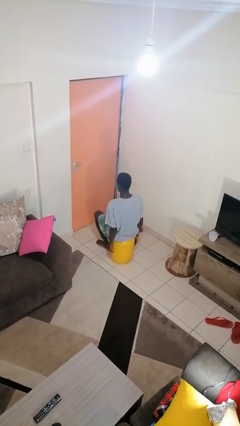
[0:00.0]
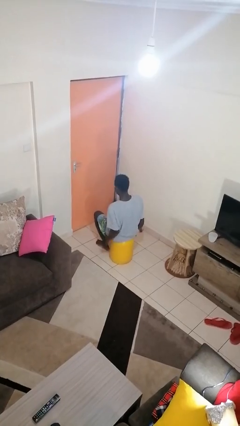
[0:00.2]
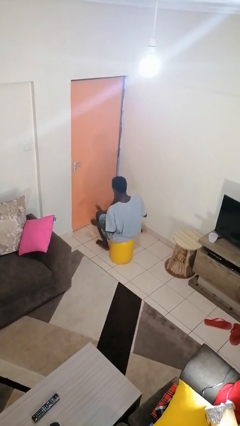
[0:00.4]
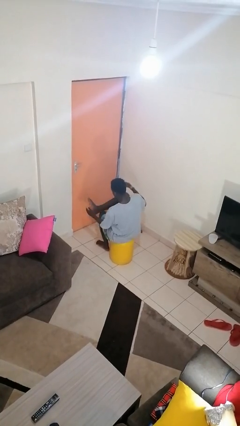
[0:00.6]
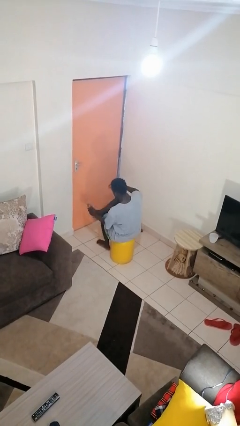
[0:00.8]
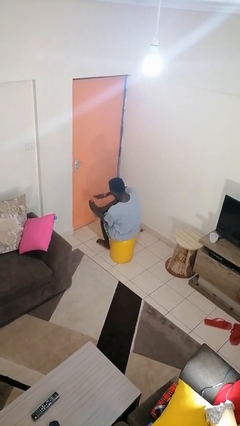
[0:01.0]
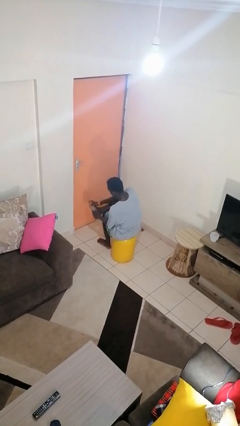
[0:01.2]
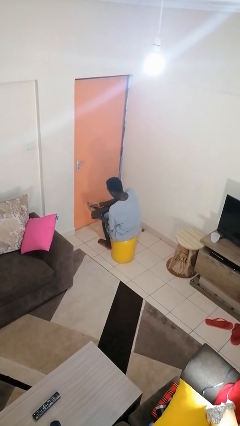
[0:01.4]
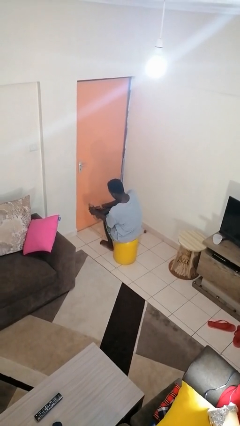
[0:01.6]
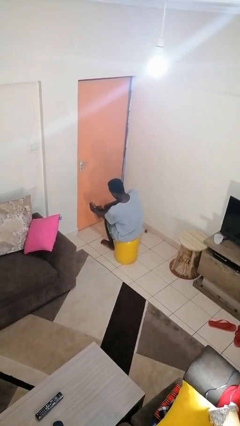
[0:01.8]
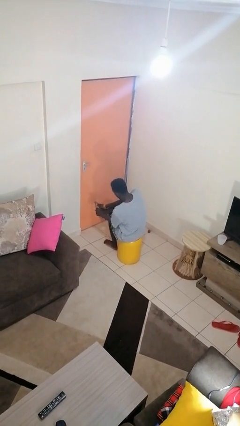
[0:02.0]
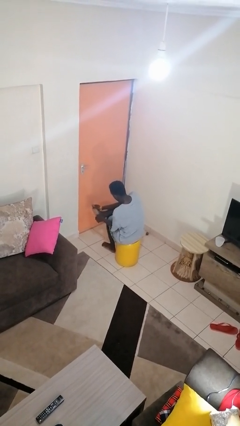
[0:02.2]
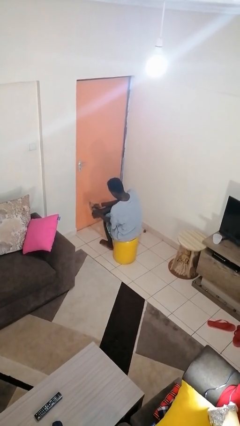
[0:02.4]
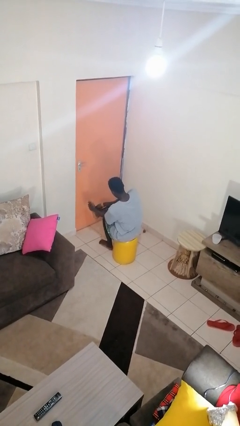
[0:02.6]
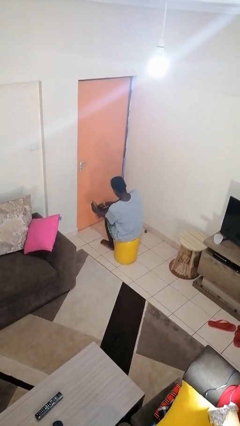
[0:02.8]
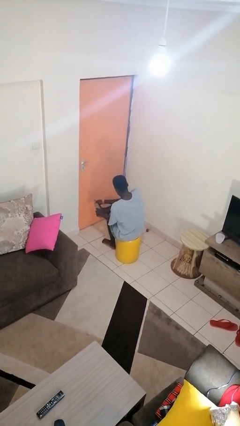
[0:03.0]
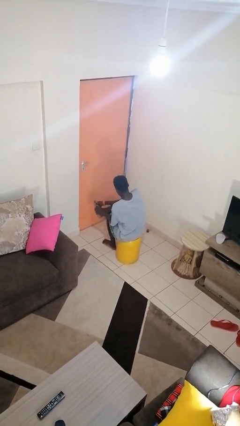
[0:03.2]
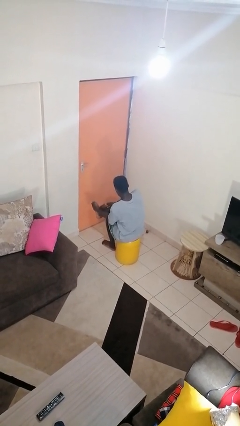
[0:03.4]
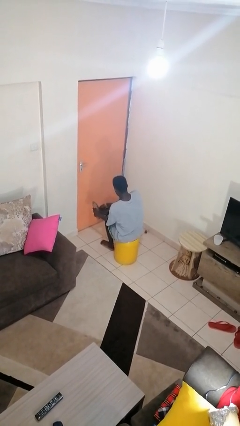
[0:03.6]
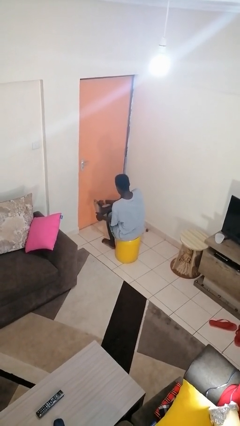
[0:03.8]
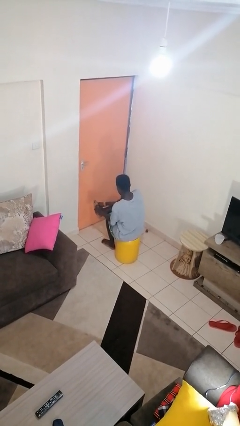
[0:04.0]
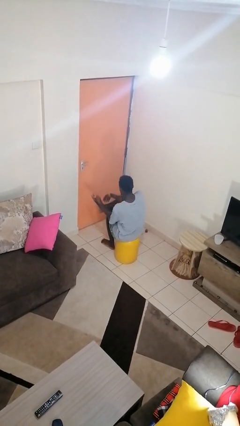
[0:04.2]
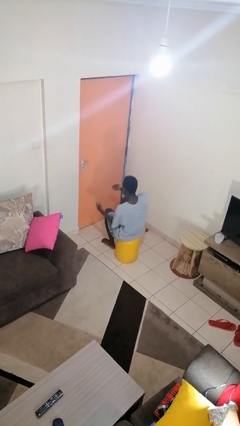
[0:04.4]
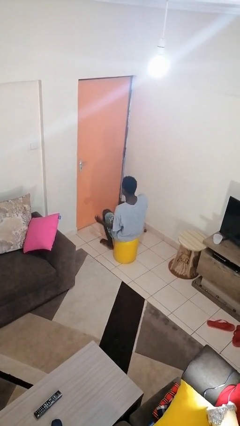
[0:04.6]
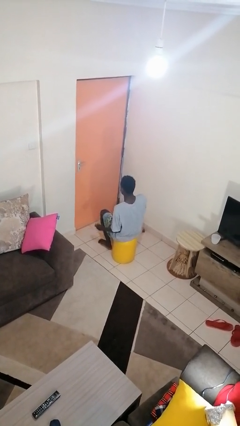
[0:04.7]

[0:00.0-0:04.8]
person rubs foot

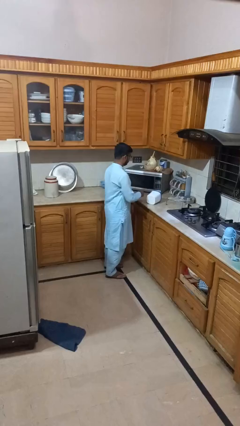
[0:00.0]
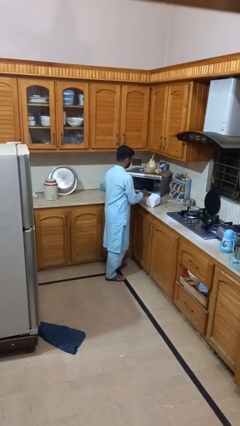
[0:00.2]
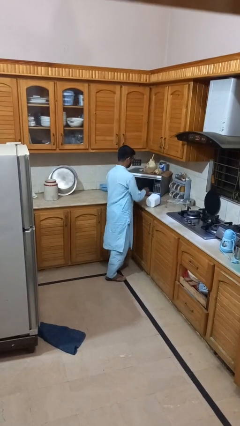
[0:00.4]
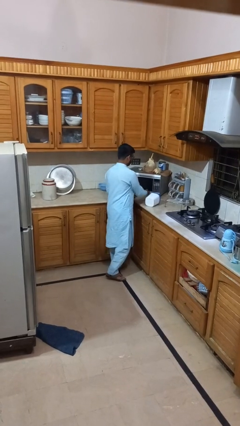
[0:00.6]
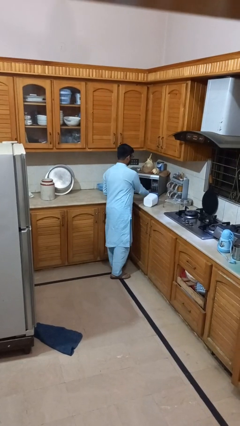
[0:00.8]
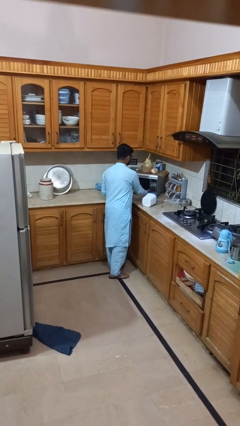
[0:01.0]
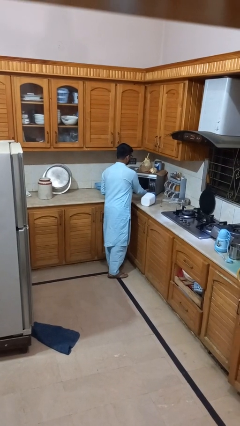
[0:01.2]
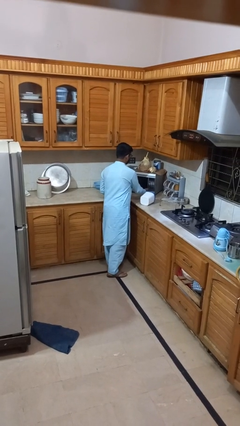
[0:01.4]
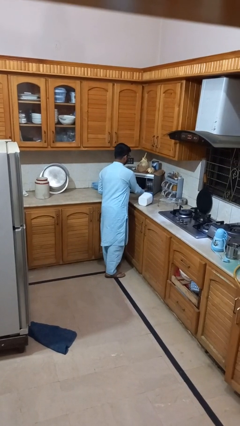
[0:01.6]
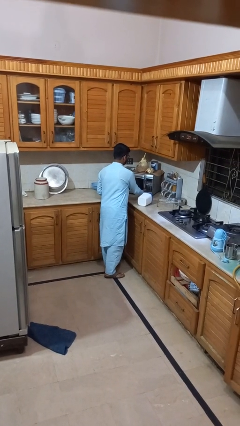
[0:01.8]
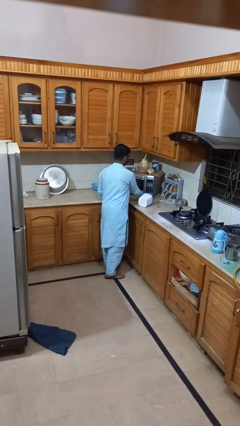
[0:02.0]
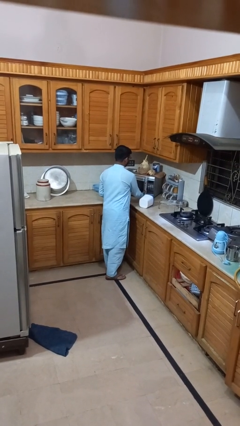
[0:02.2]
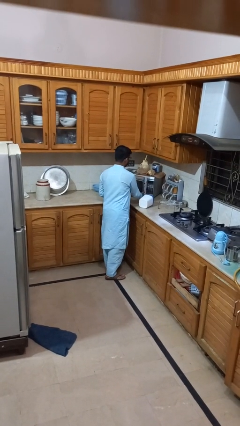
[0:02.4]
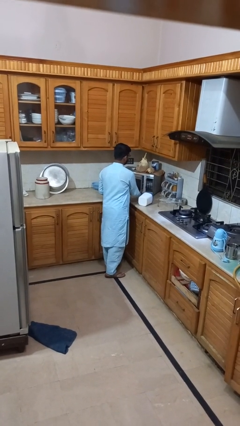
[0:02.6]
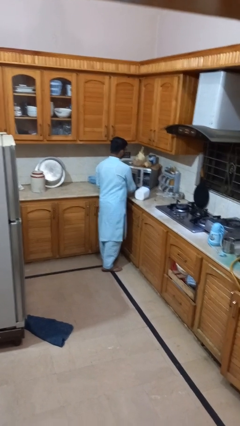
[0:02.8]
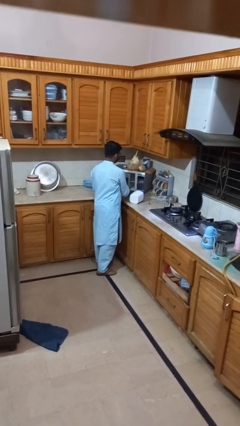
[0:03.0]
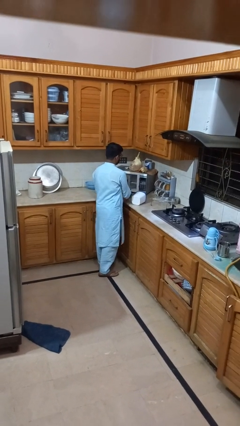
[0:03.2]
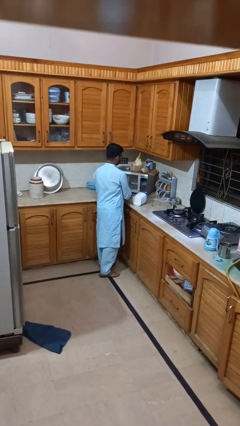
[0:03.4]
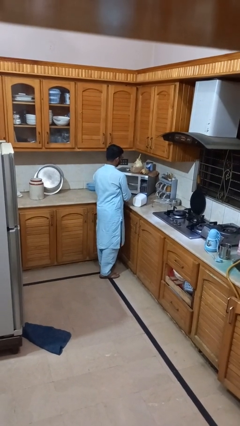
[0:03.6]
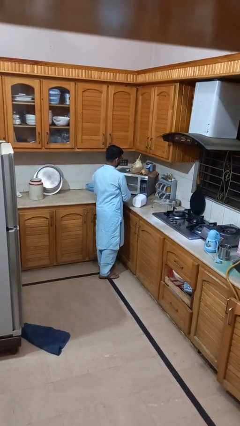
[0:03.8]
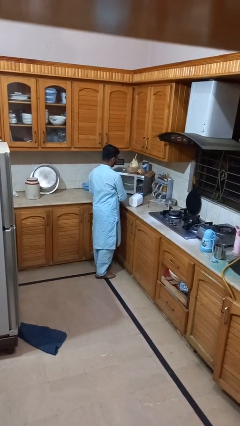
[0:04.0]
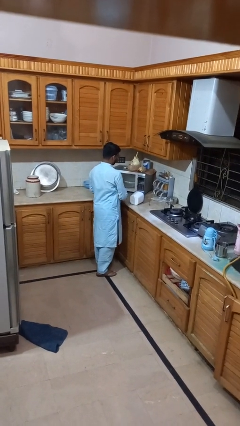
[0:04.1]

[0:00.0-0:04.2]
person opens microwave

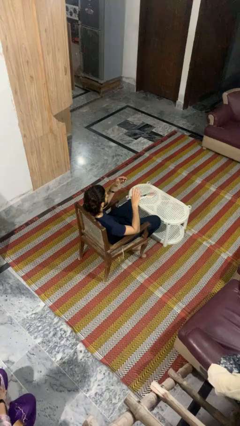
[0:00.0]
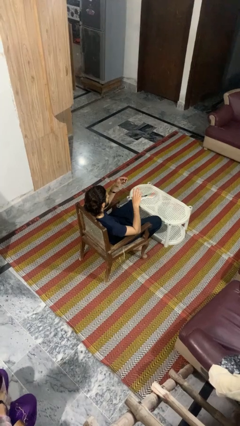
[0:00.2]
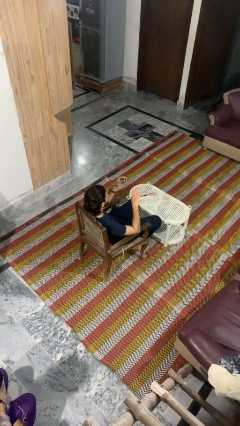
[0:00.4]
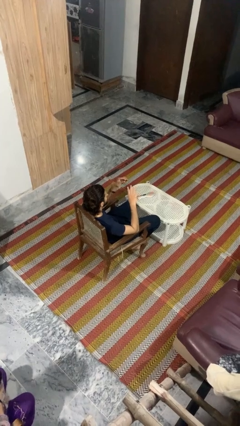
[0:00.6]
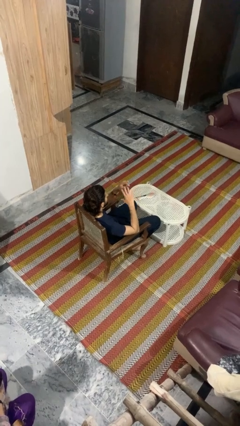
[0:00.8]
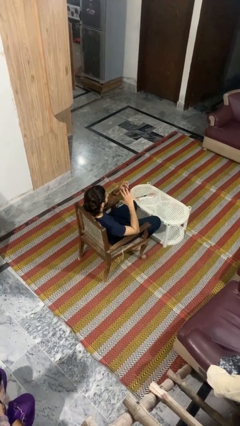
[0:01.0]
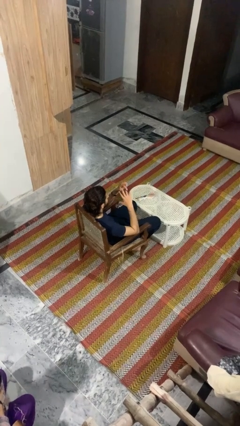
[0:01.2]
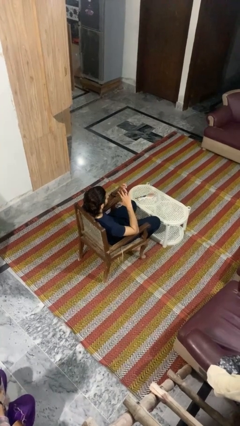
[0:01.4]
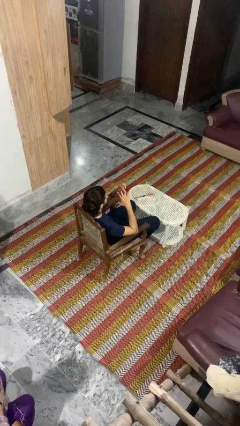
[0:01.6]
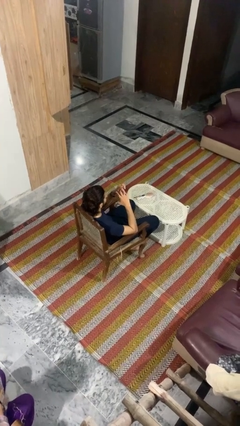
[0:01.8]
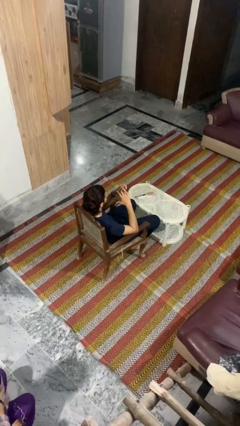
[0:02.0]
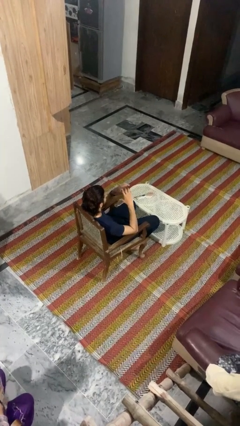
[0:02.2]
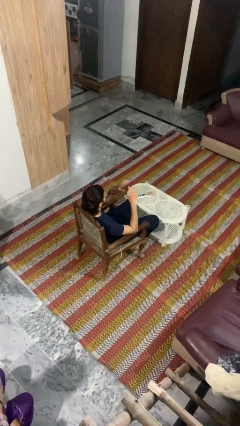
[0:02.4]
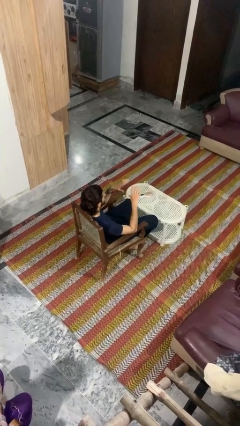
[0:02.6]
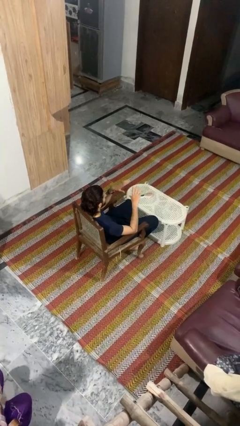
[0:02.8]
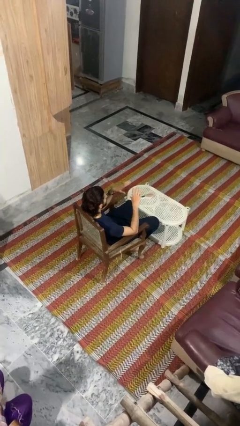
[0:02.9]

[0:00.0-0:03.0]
person puts on ring

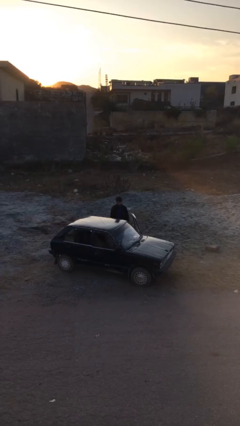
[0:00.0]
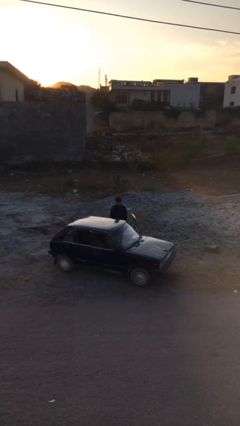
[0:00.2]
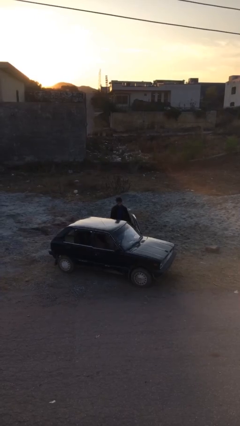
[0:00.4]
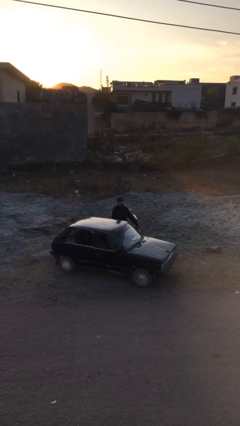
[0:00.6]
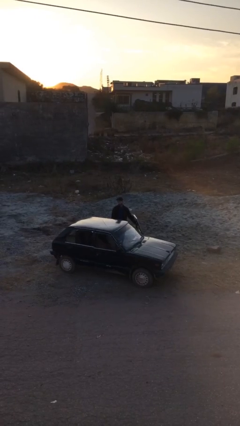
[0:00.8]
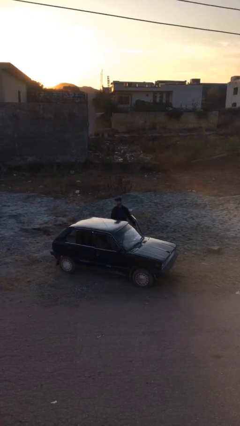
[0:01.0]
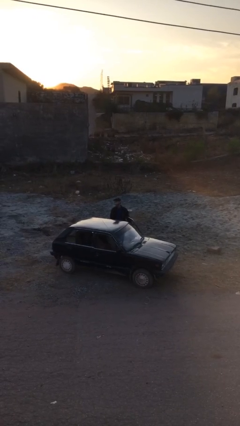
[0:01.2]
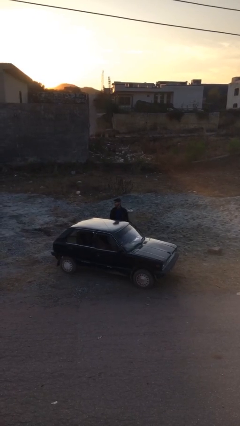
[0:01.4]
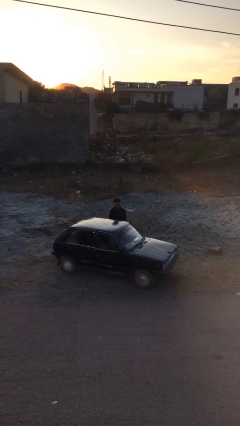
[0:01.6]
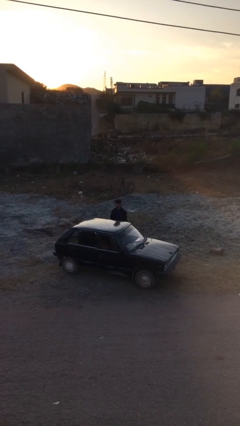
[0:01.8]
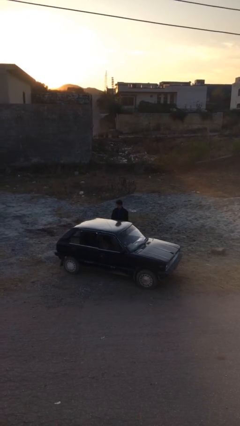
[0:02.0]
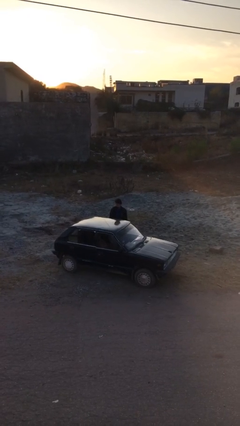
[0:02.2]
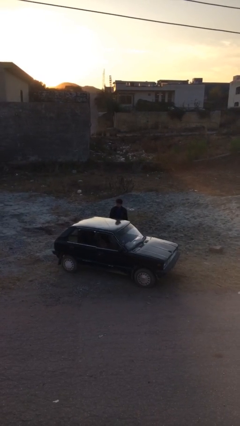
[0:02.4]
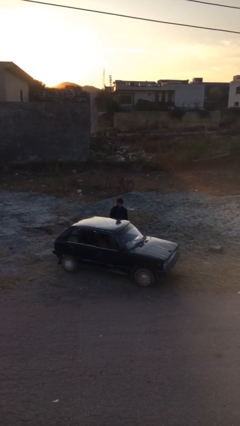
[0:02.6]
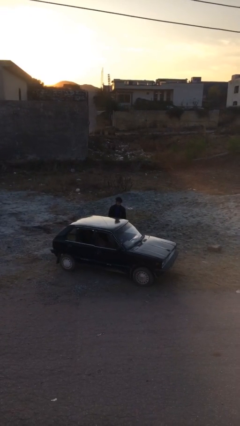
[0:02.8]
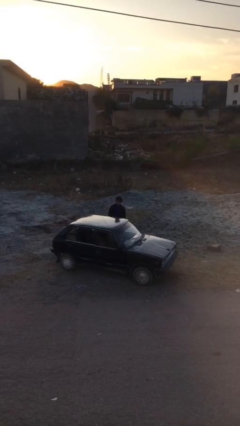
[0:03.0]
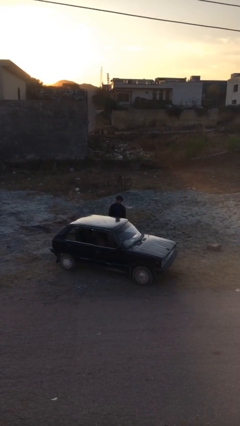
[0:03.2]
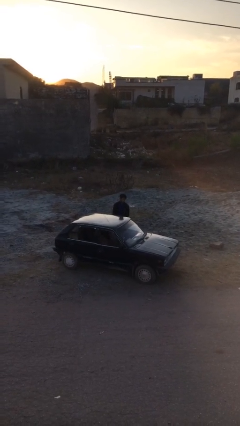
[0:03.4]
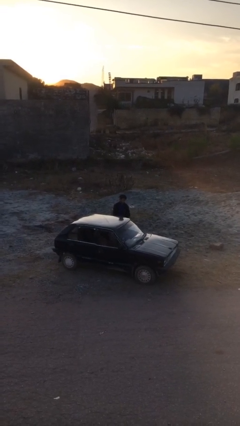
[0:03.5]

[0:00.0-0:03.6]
person closes car door

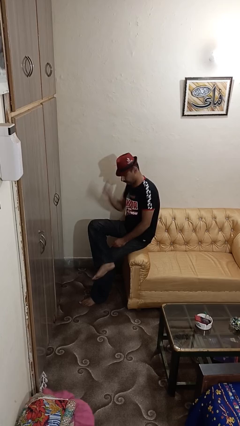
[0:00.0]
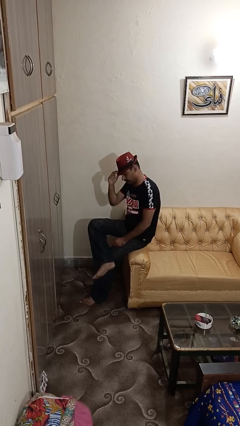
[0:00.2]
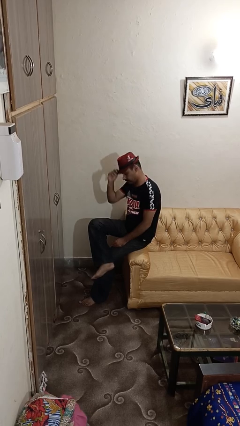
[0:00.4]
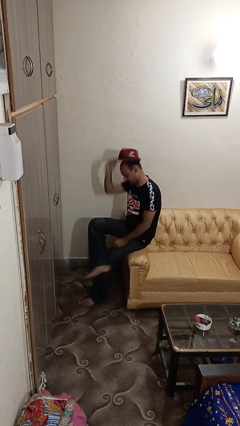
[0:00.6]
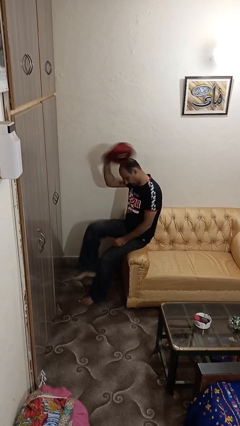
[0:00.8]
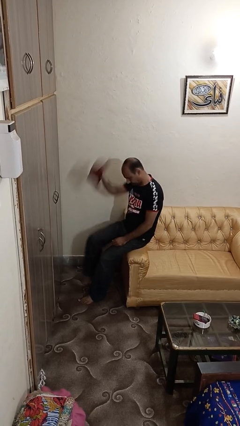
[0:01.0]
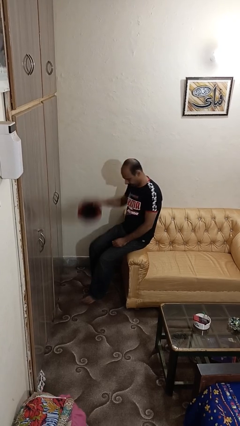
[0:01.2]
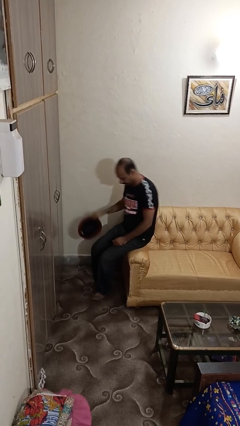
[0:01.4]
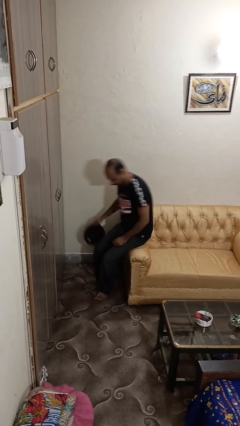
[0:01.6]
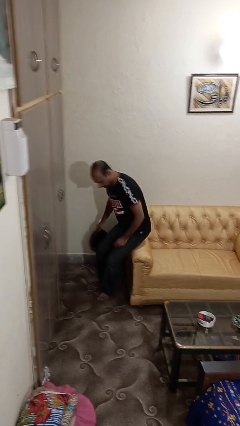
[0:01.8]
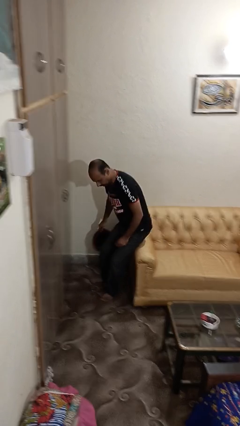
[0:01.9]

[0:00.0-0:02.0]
person takes off hat
